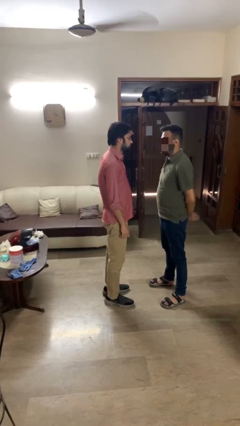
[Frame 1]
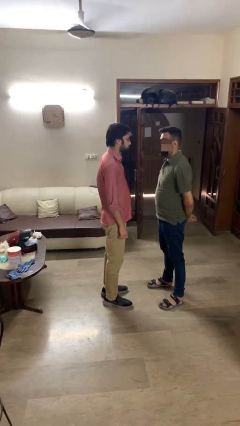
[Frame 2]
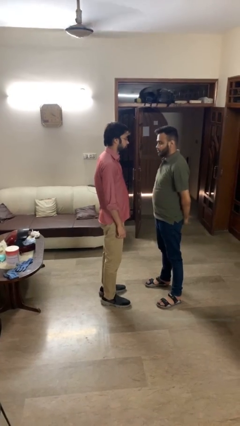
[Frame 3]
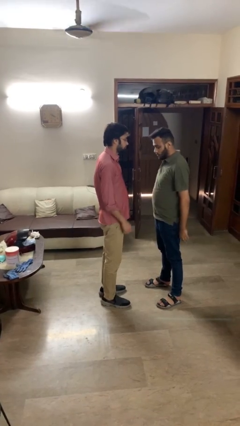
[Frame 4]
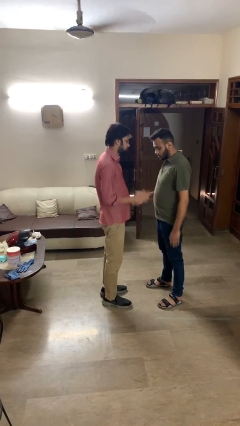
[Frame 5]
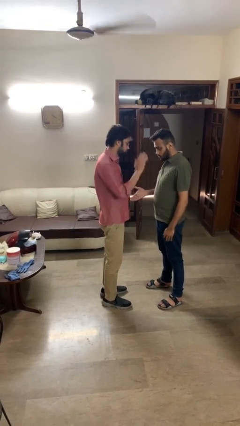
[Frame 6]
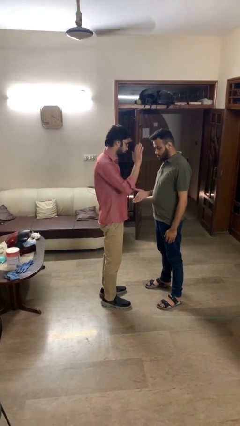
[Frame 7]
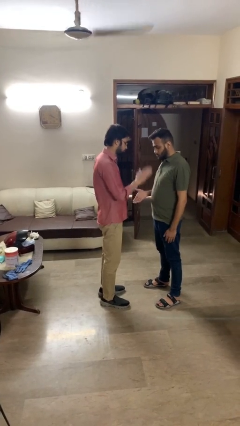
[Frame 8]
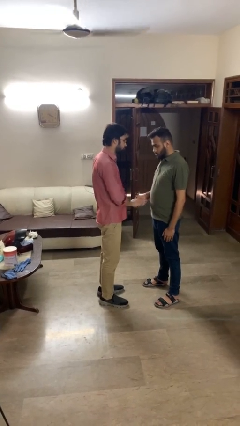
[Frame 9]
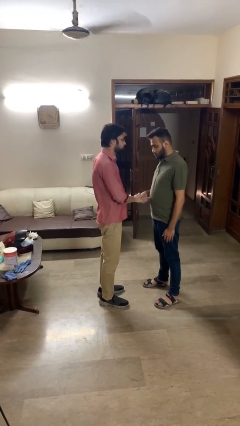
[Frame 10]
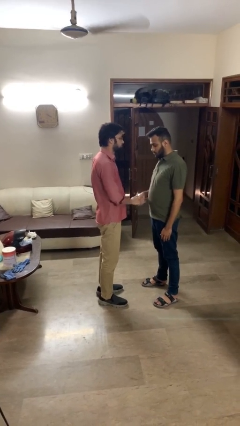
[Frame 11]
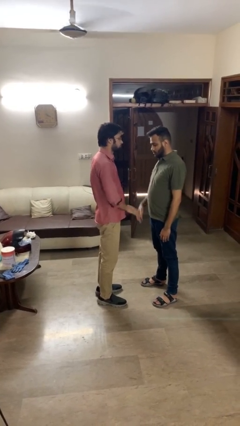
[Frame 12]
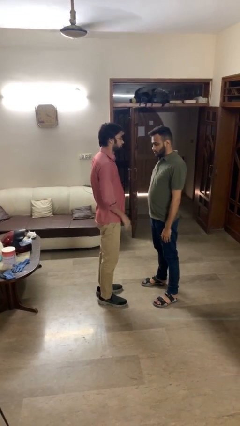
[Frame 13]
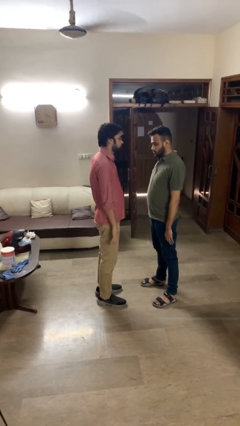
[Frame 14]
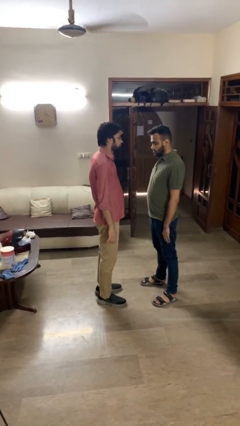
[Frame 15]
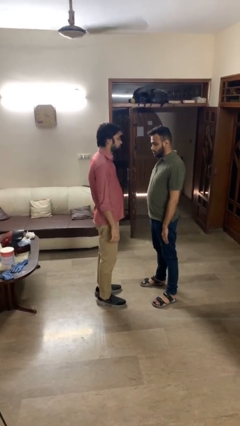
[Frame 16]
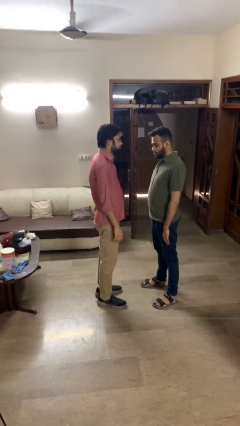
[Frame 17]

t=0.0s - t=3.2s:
person highfives hand

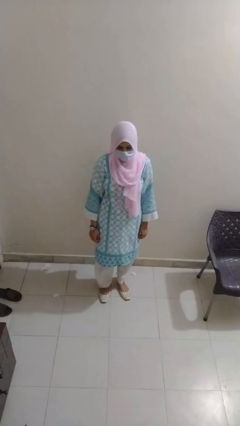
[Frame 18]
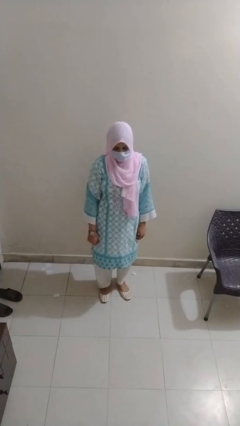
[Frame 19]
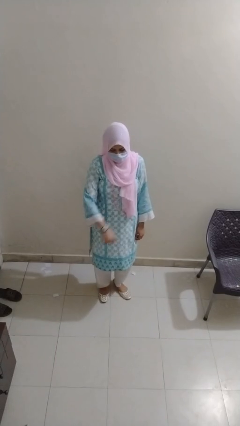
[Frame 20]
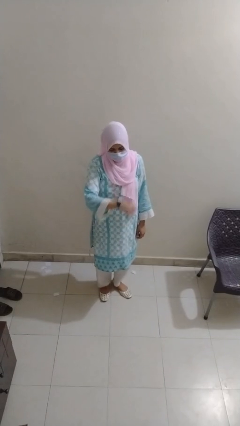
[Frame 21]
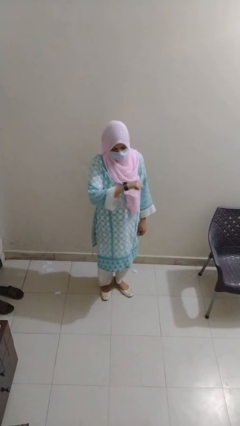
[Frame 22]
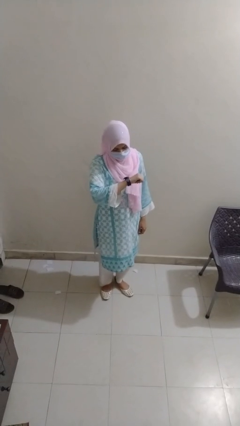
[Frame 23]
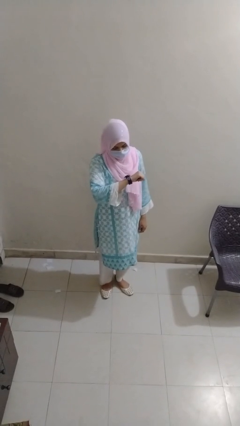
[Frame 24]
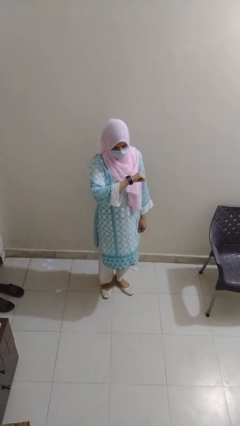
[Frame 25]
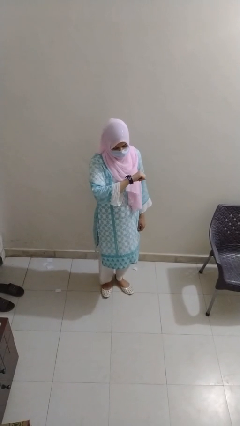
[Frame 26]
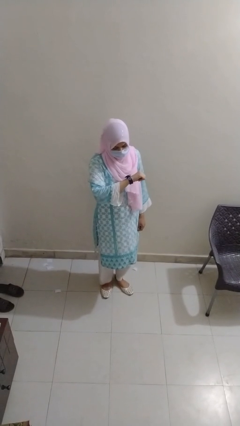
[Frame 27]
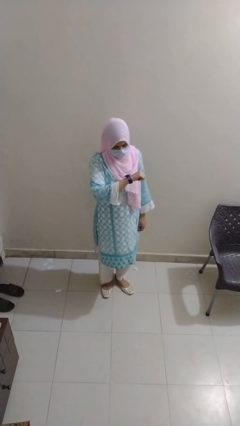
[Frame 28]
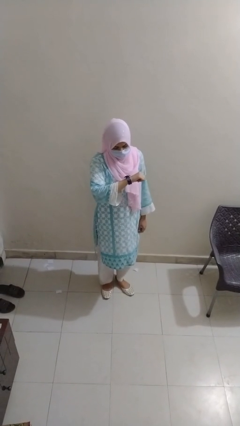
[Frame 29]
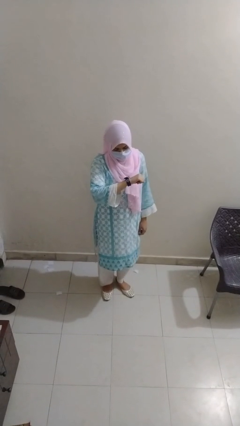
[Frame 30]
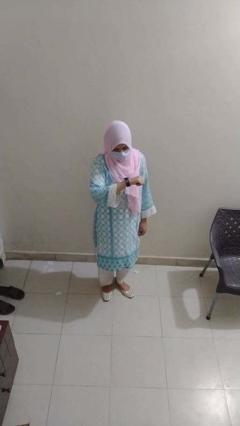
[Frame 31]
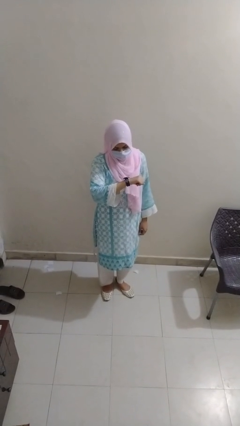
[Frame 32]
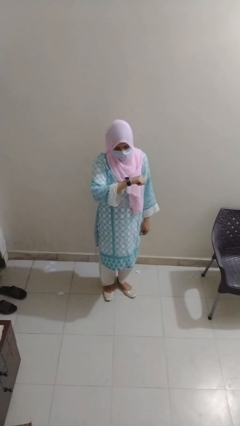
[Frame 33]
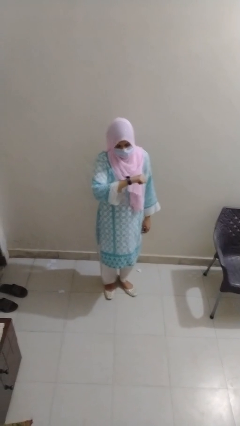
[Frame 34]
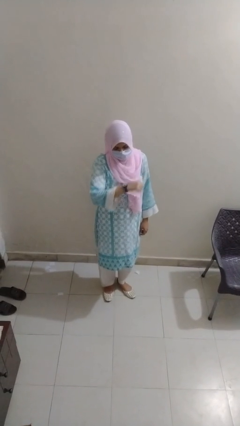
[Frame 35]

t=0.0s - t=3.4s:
person looks at wristwatch

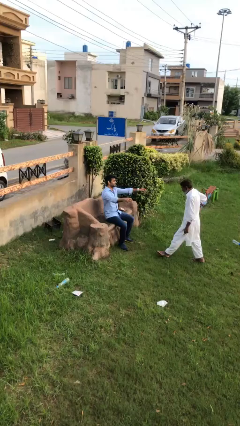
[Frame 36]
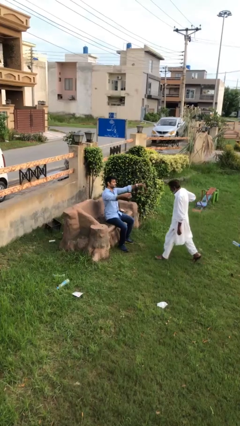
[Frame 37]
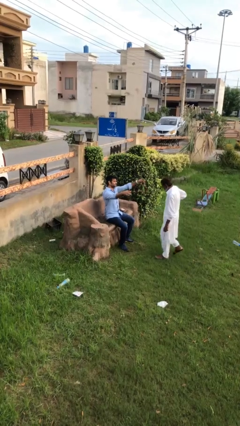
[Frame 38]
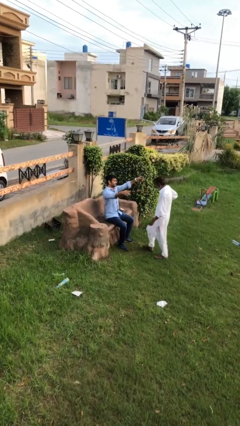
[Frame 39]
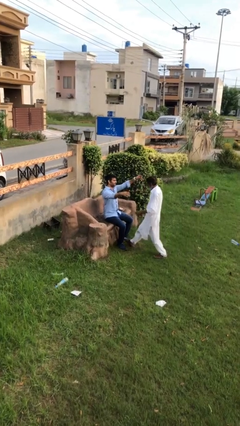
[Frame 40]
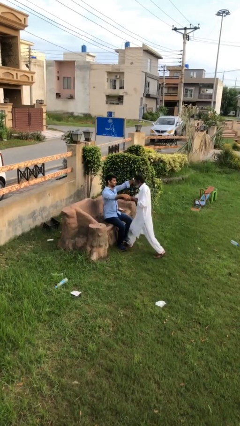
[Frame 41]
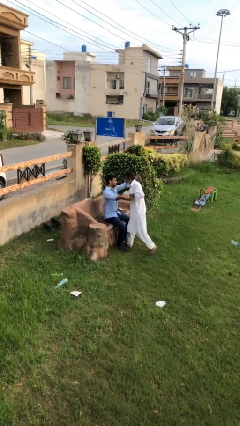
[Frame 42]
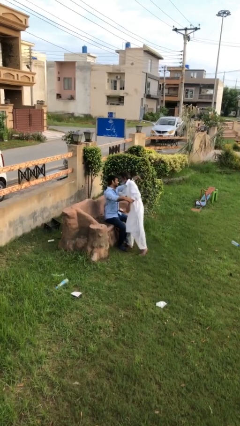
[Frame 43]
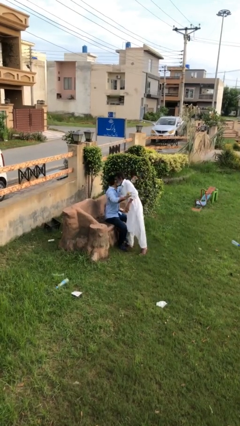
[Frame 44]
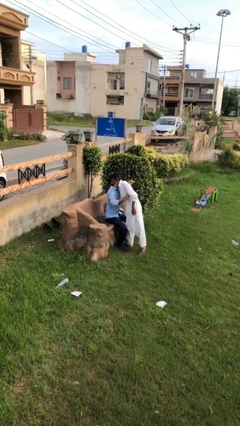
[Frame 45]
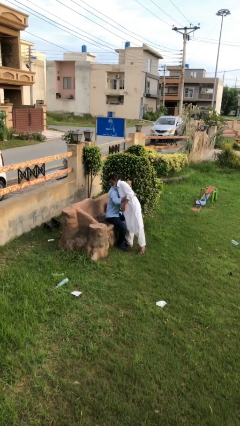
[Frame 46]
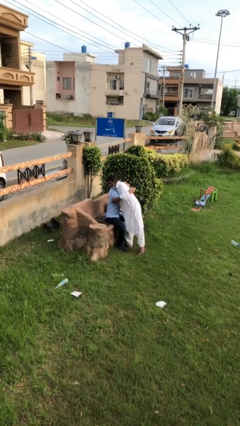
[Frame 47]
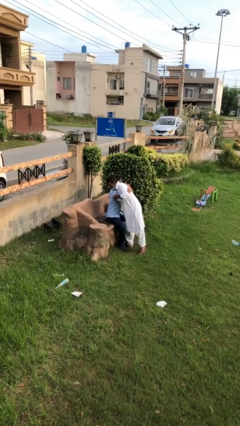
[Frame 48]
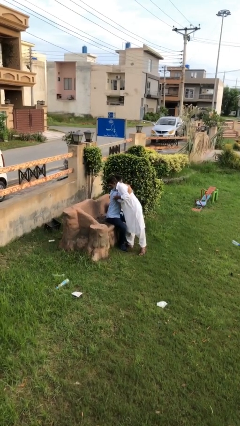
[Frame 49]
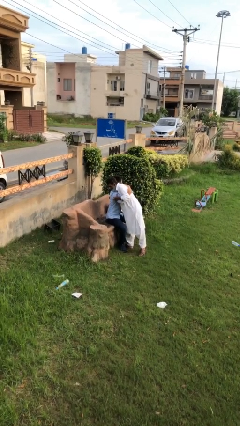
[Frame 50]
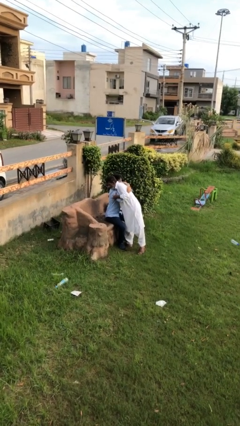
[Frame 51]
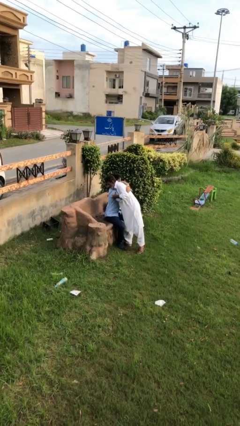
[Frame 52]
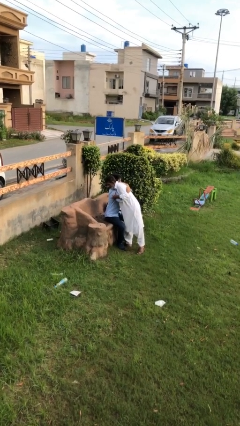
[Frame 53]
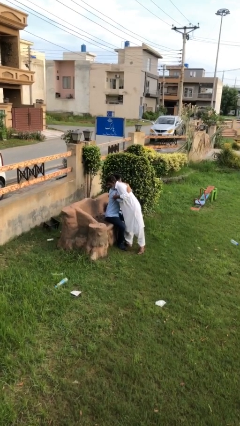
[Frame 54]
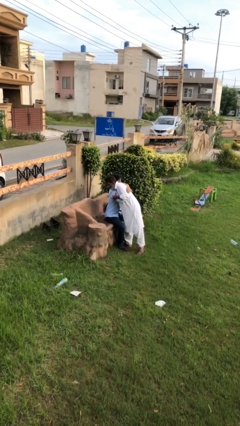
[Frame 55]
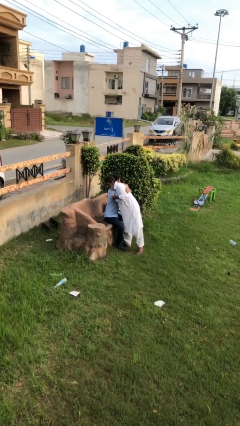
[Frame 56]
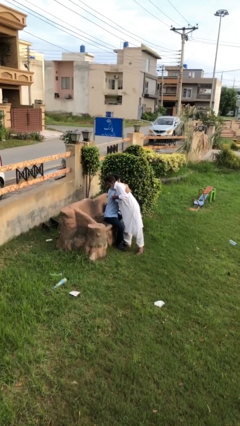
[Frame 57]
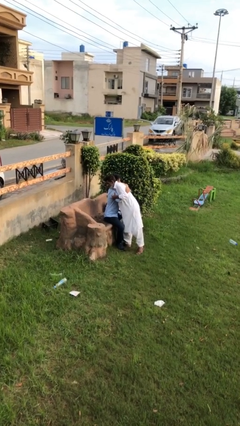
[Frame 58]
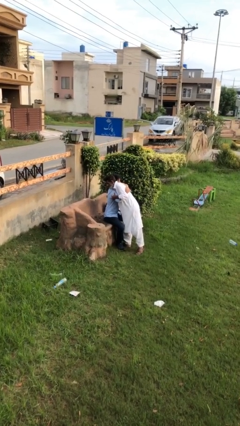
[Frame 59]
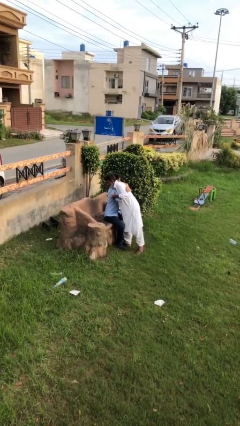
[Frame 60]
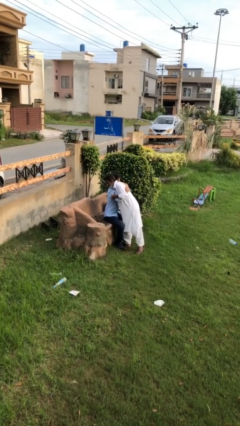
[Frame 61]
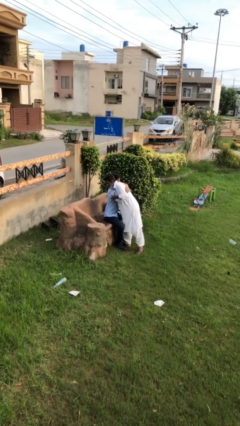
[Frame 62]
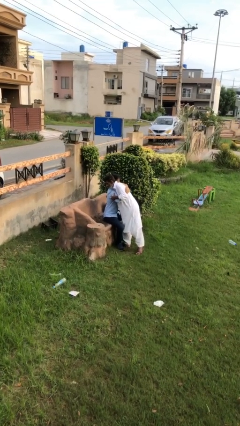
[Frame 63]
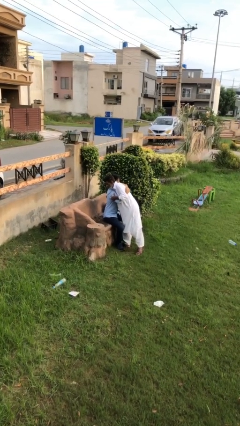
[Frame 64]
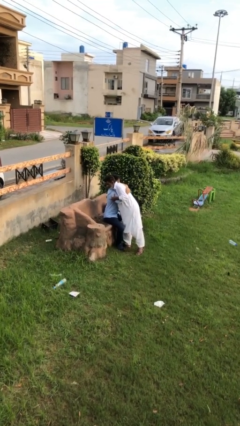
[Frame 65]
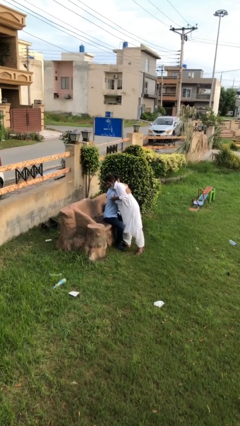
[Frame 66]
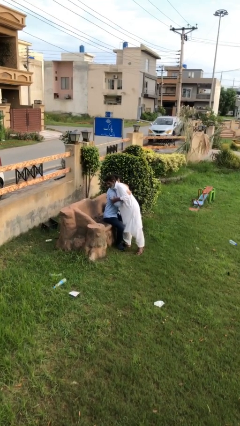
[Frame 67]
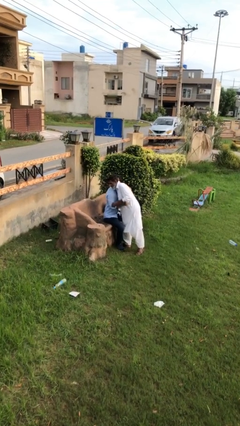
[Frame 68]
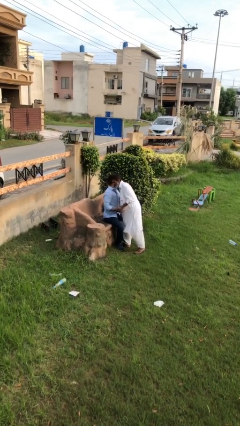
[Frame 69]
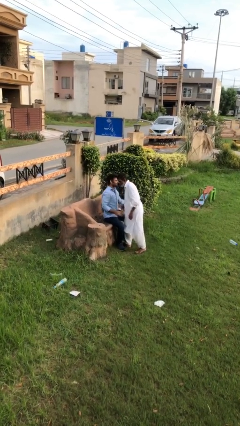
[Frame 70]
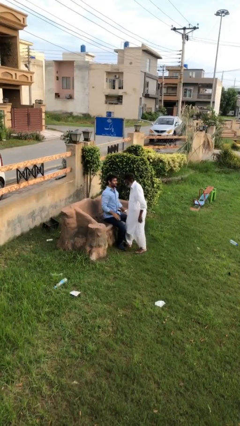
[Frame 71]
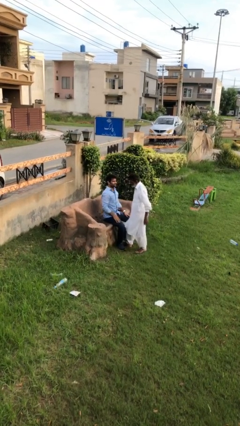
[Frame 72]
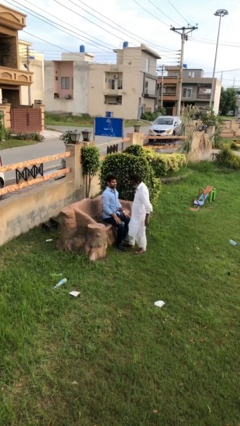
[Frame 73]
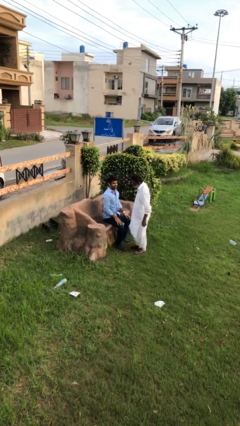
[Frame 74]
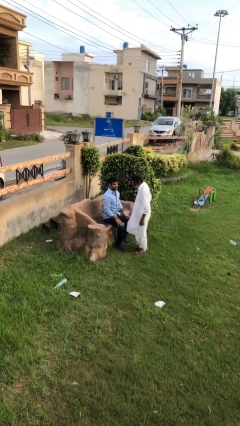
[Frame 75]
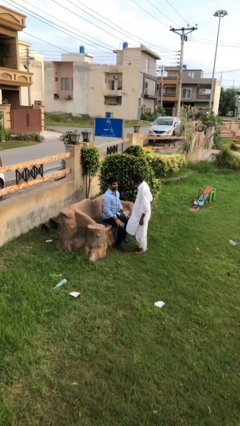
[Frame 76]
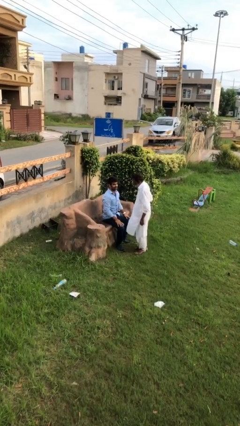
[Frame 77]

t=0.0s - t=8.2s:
person embraces person

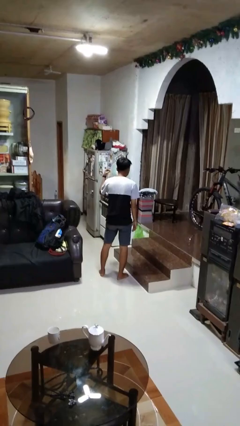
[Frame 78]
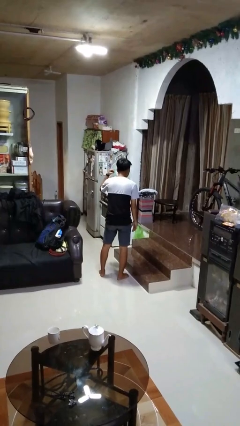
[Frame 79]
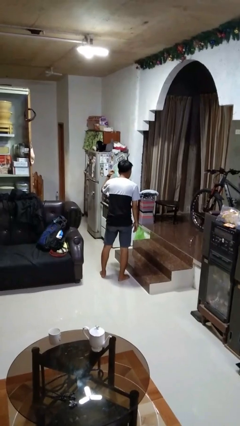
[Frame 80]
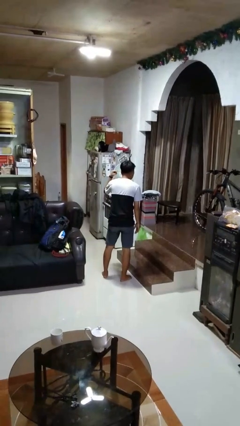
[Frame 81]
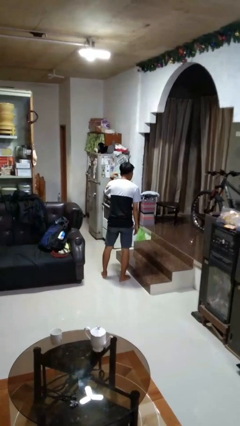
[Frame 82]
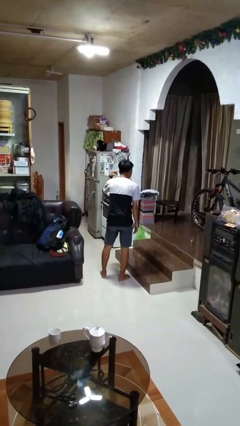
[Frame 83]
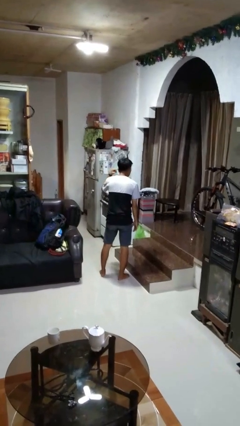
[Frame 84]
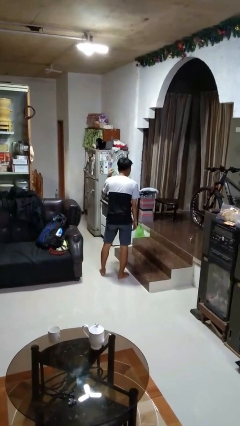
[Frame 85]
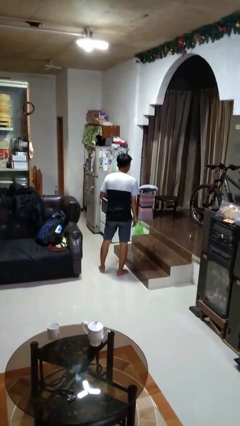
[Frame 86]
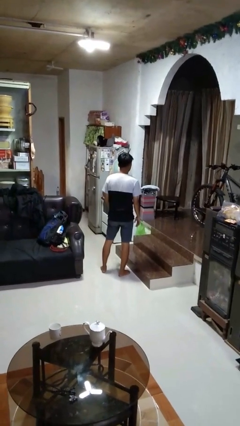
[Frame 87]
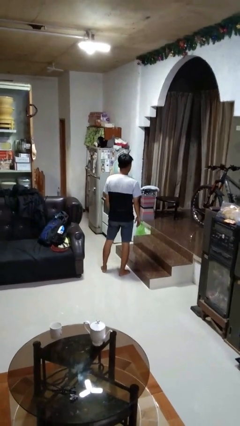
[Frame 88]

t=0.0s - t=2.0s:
person gestures listen closely

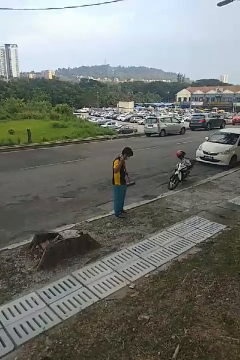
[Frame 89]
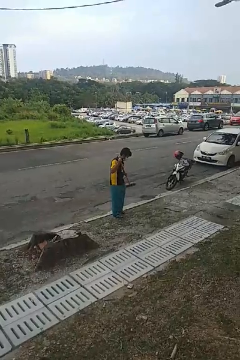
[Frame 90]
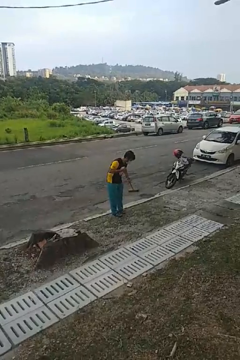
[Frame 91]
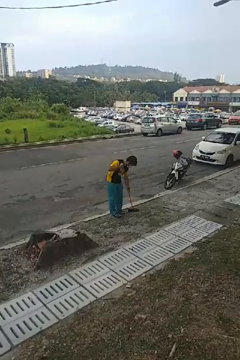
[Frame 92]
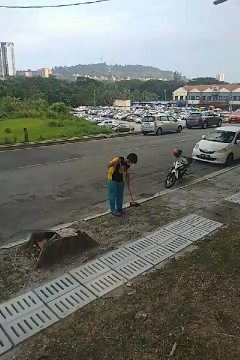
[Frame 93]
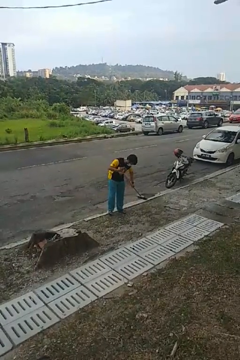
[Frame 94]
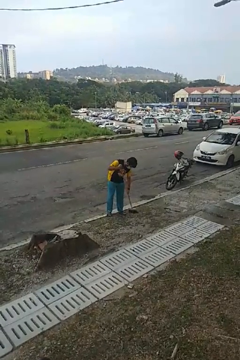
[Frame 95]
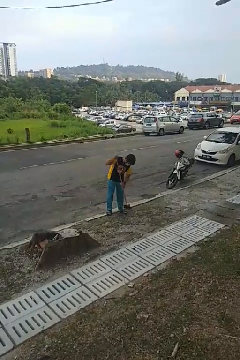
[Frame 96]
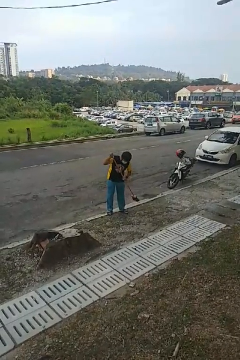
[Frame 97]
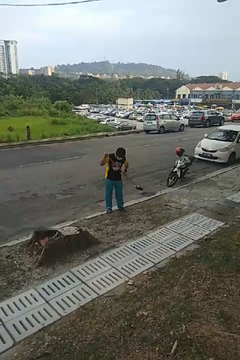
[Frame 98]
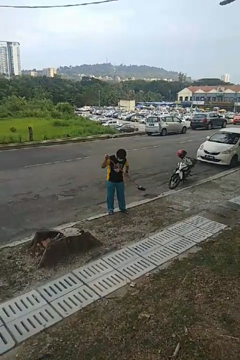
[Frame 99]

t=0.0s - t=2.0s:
person sweeps floor
